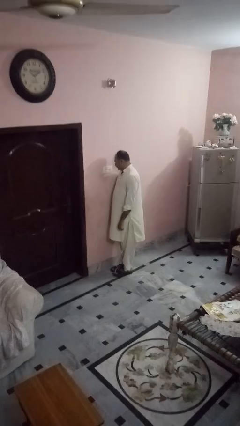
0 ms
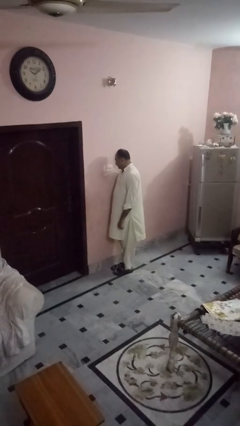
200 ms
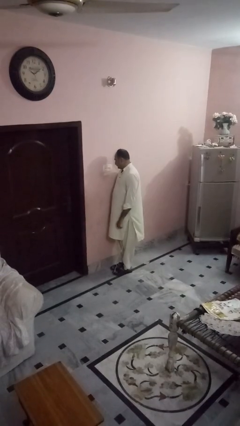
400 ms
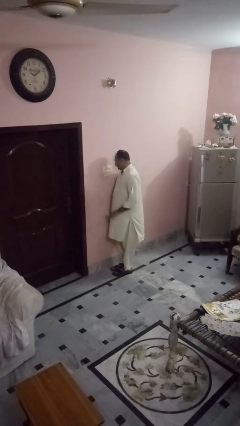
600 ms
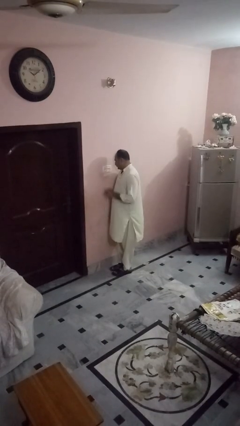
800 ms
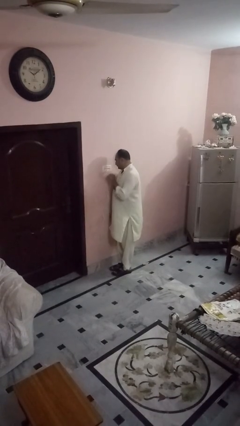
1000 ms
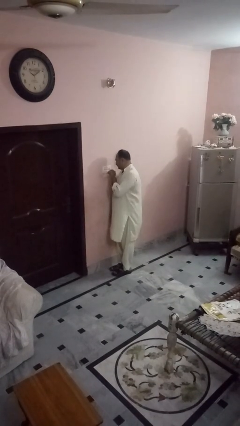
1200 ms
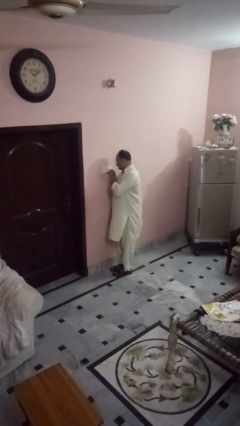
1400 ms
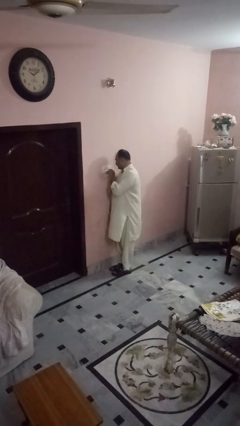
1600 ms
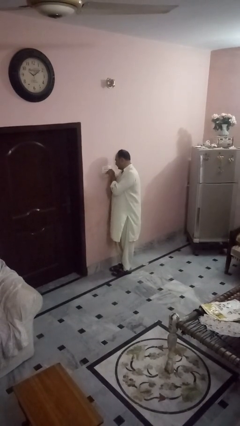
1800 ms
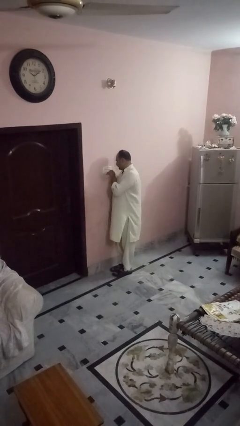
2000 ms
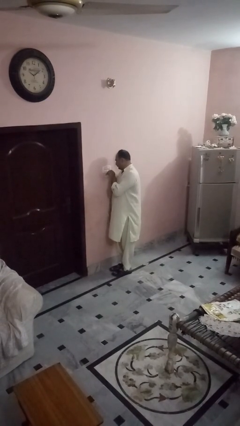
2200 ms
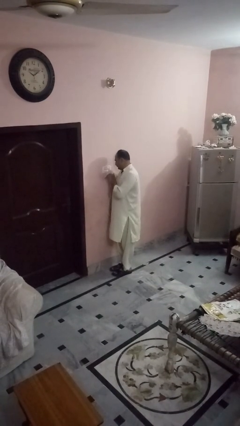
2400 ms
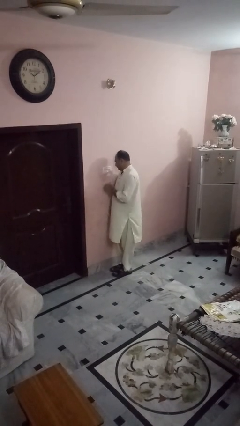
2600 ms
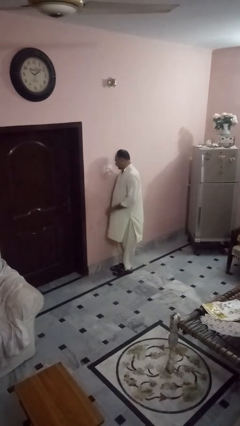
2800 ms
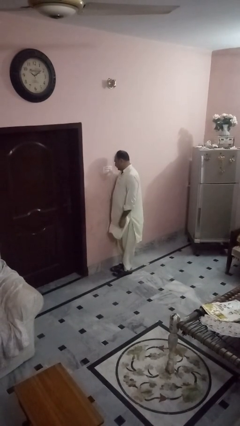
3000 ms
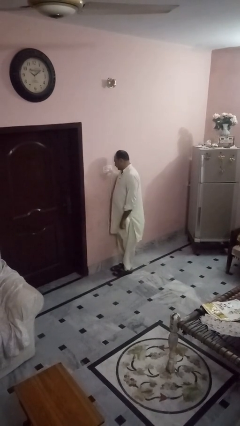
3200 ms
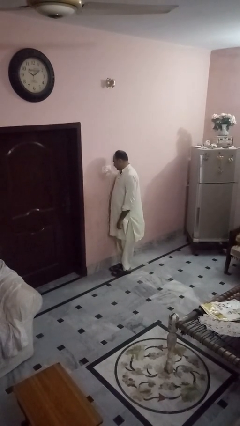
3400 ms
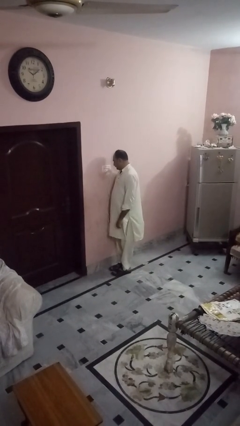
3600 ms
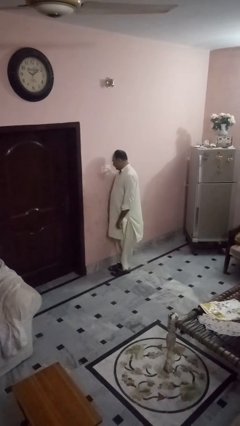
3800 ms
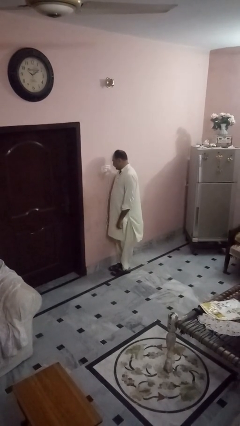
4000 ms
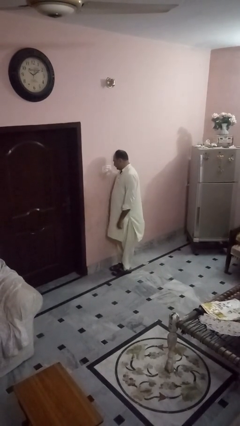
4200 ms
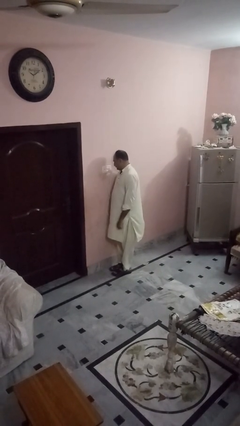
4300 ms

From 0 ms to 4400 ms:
person plugs into electrical socket

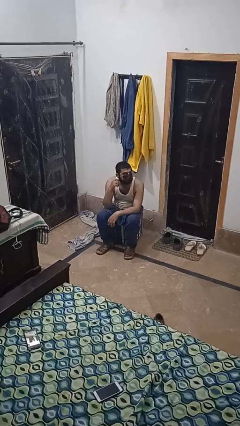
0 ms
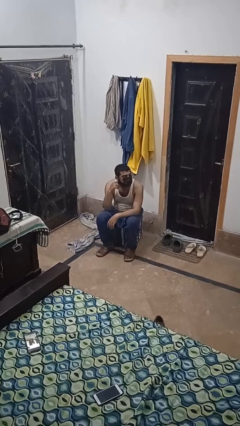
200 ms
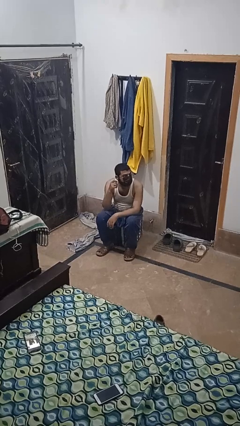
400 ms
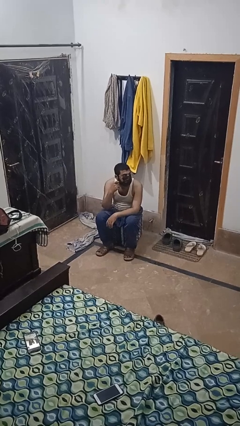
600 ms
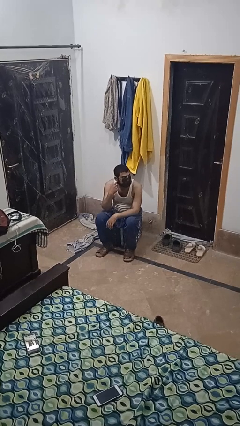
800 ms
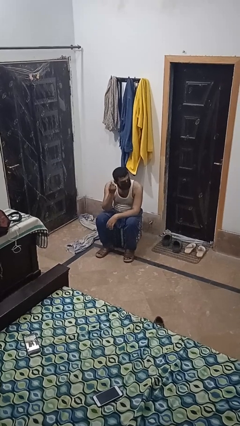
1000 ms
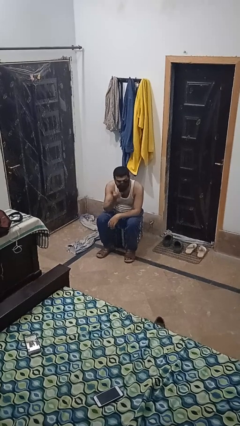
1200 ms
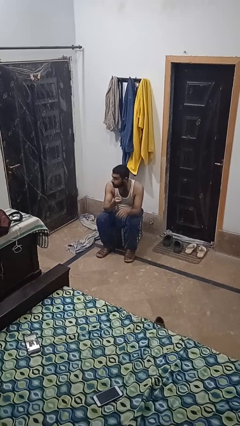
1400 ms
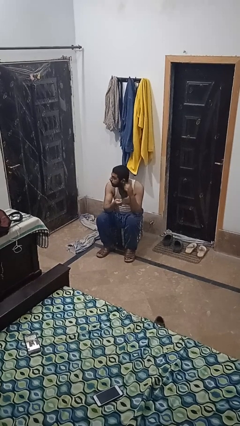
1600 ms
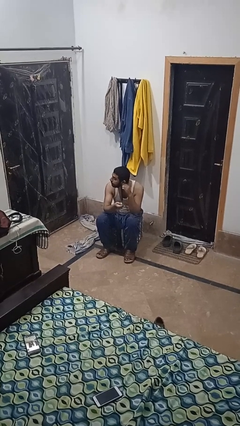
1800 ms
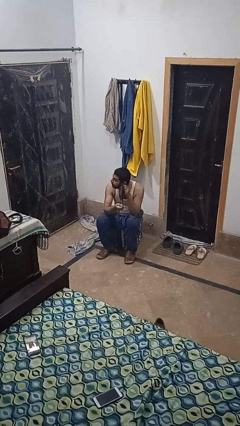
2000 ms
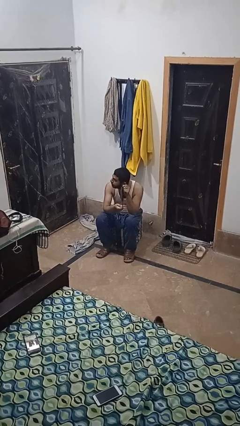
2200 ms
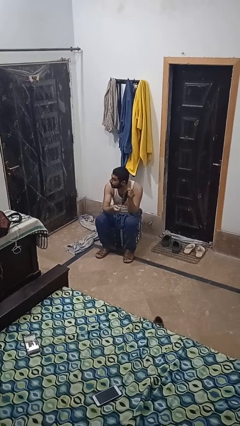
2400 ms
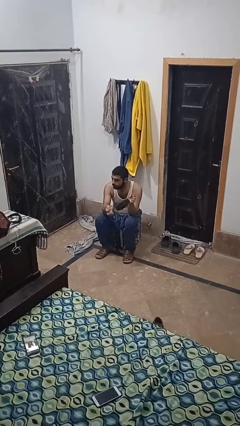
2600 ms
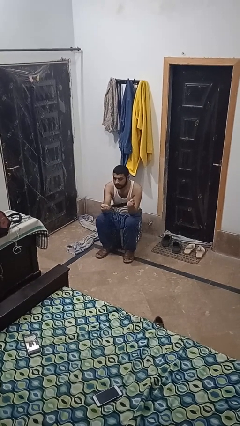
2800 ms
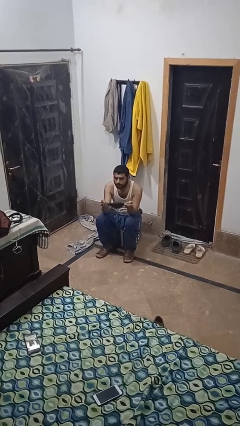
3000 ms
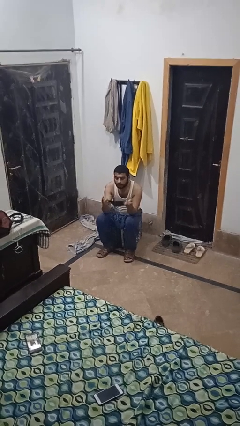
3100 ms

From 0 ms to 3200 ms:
person takes off facemask

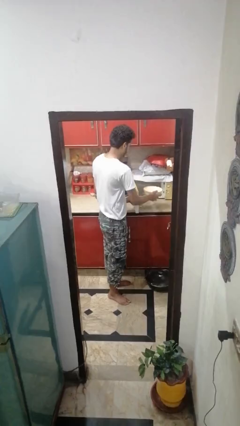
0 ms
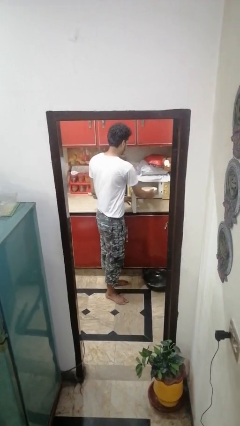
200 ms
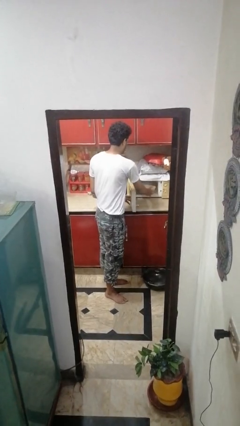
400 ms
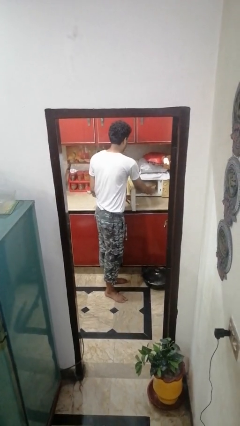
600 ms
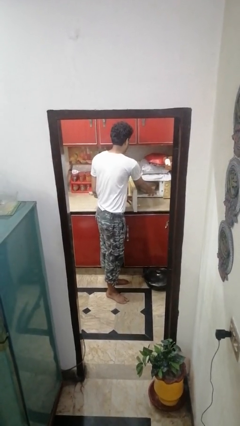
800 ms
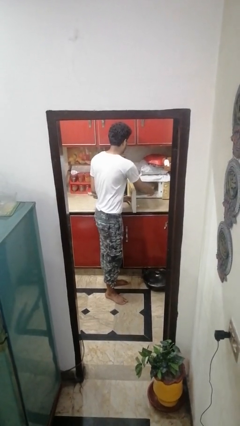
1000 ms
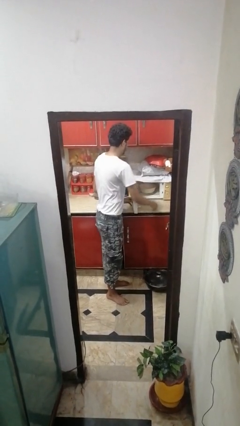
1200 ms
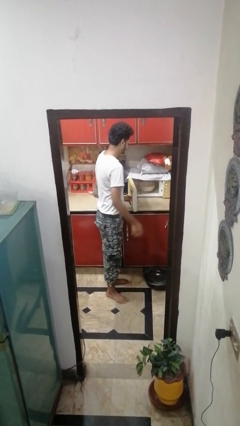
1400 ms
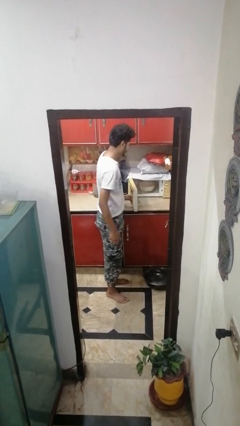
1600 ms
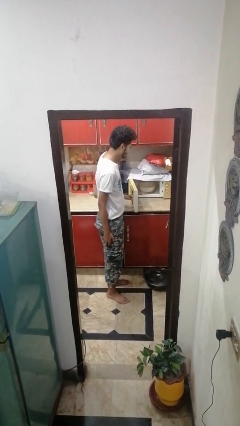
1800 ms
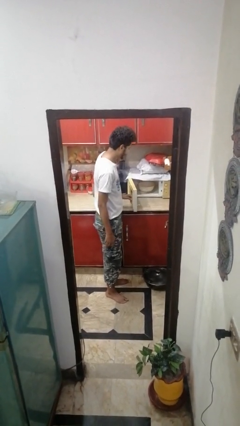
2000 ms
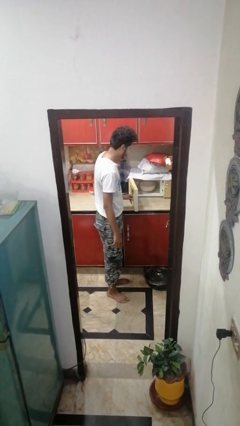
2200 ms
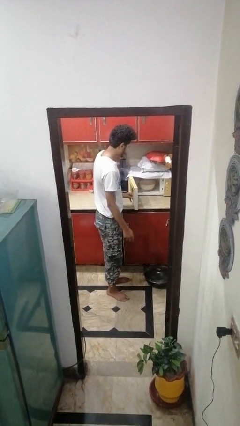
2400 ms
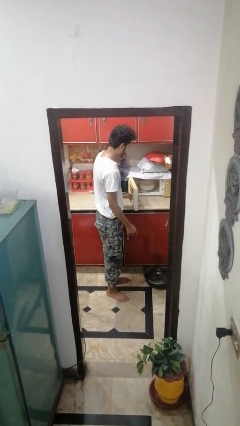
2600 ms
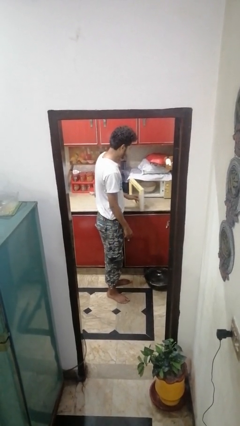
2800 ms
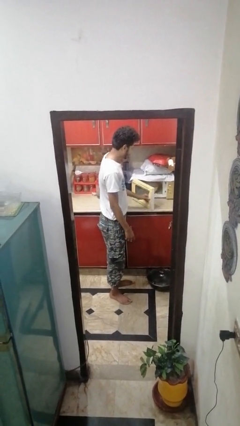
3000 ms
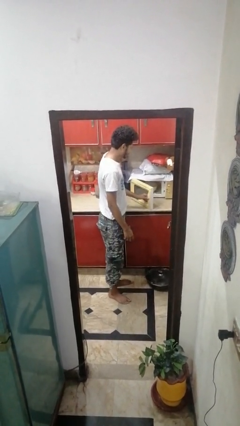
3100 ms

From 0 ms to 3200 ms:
person puts object into microwave

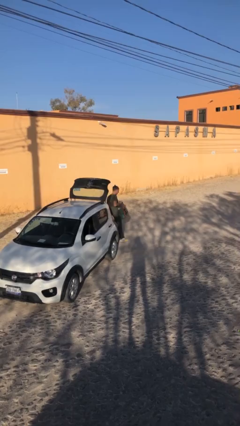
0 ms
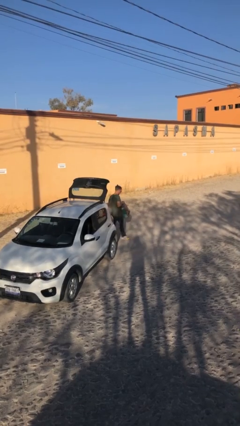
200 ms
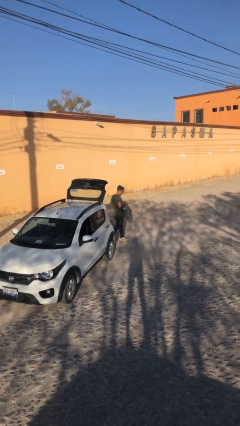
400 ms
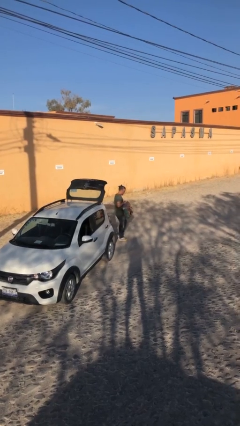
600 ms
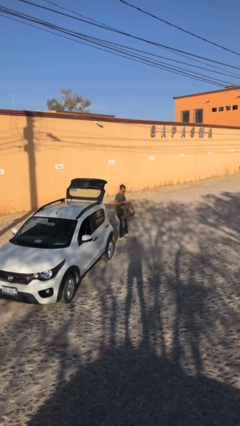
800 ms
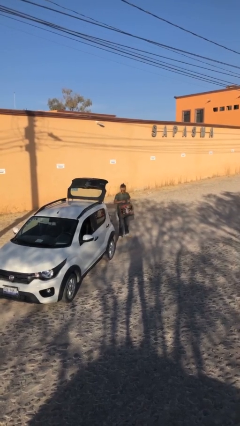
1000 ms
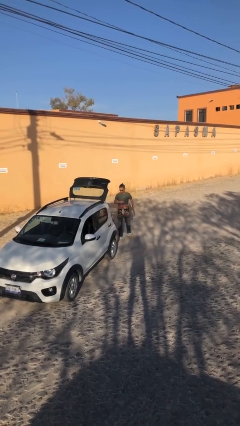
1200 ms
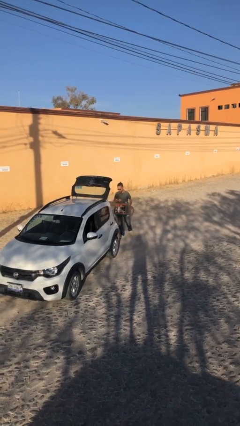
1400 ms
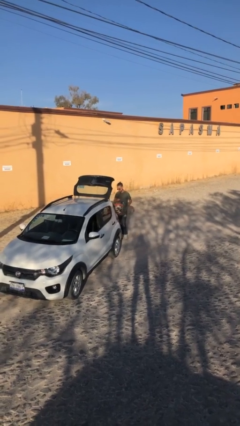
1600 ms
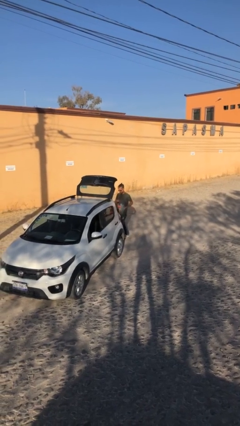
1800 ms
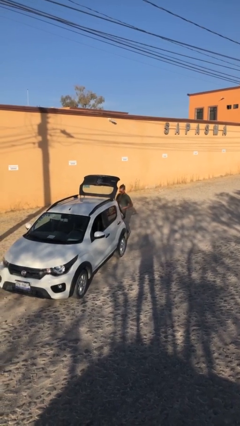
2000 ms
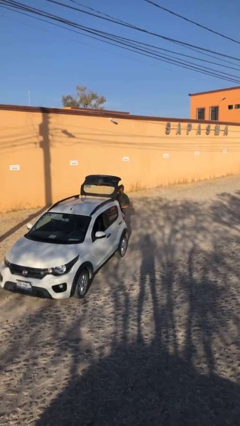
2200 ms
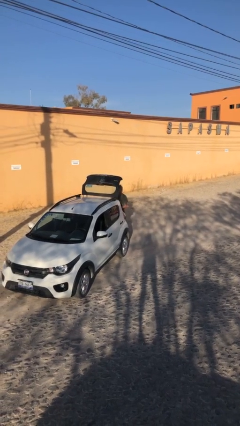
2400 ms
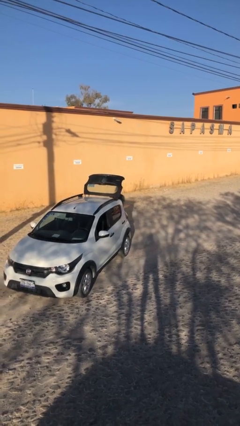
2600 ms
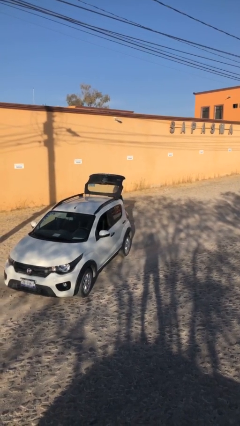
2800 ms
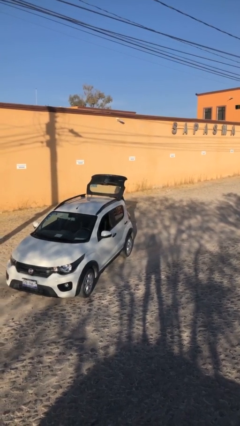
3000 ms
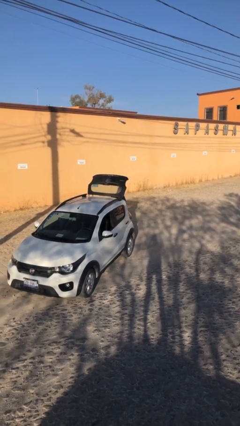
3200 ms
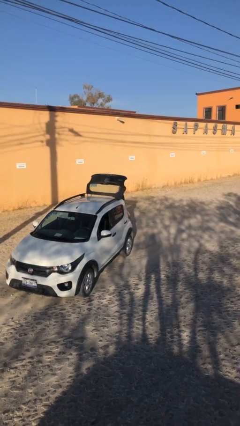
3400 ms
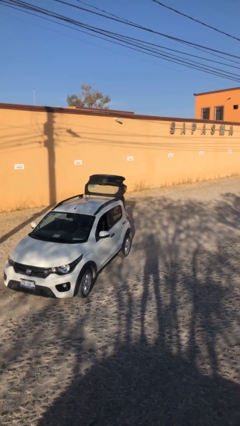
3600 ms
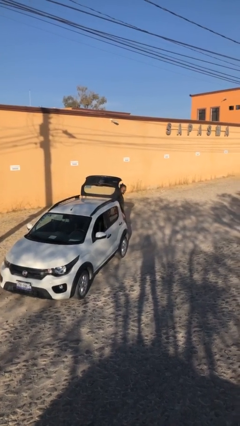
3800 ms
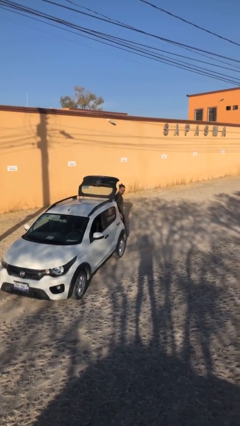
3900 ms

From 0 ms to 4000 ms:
person loads car

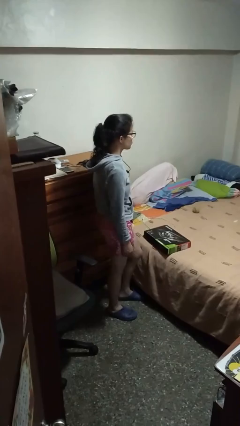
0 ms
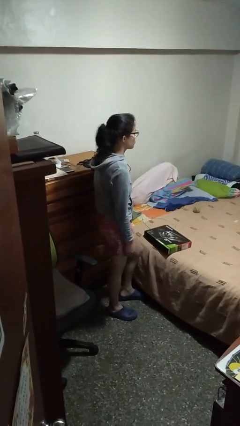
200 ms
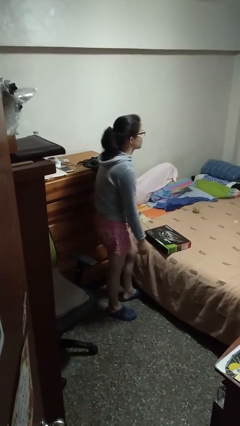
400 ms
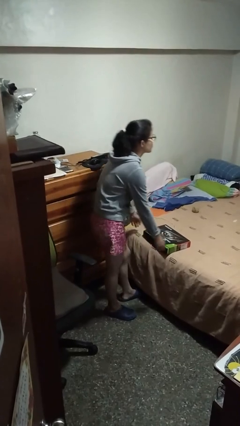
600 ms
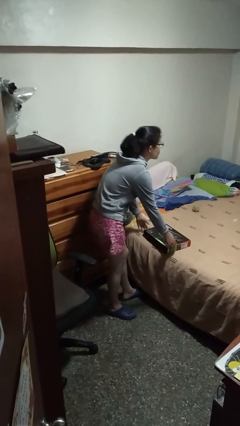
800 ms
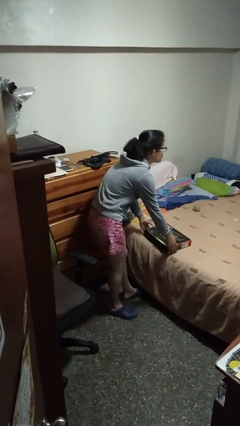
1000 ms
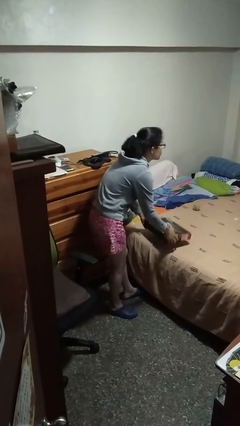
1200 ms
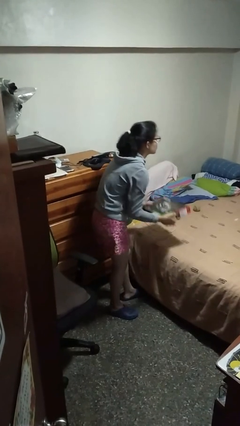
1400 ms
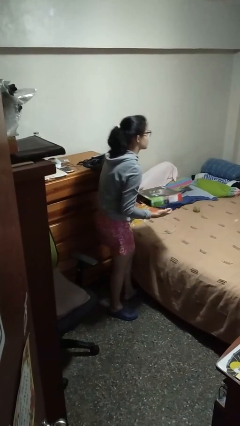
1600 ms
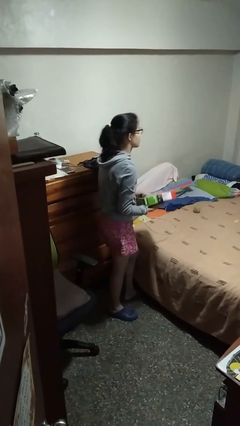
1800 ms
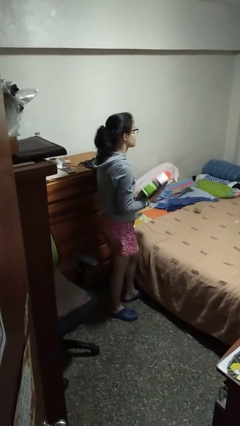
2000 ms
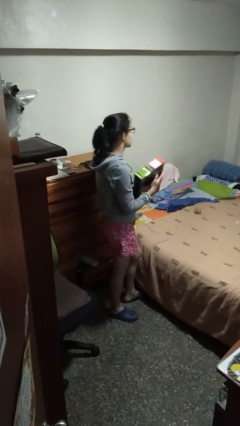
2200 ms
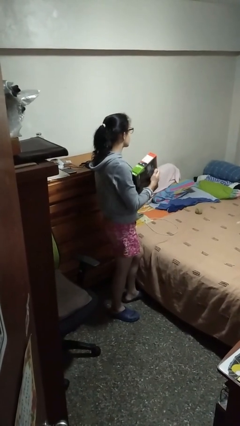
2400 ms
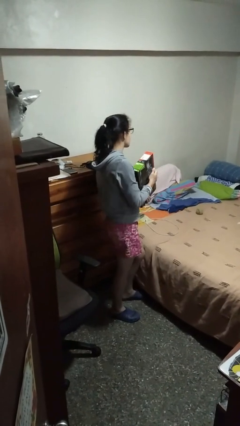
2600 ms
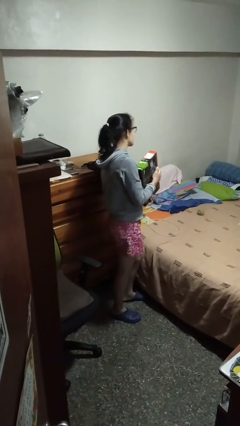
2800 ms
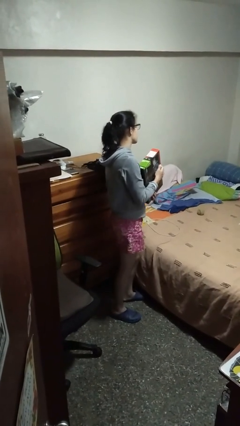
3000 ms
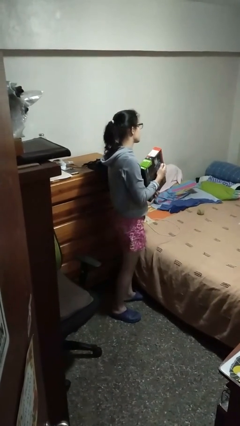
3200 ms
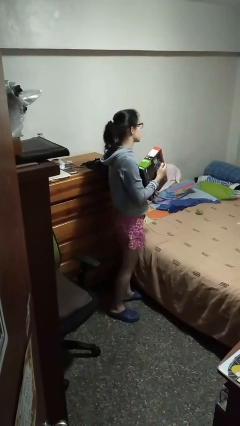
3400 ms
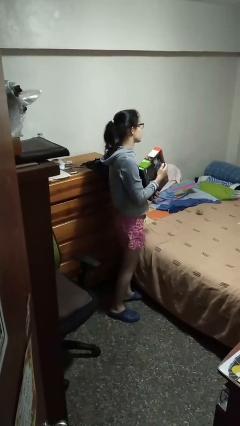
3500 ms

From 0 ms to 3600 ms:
person picks up object from bed
